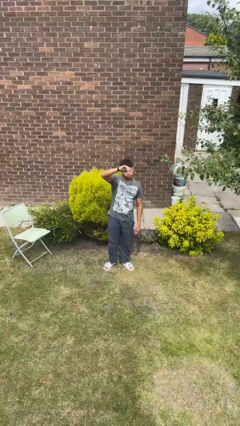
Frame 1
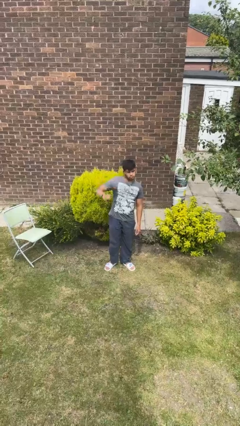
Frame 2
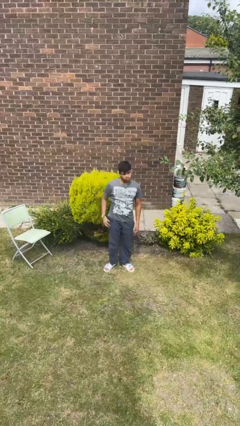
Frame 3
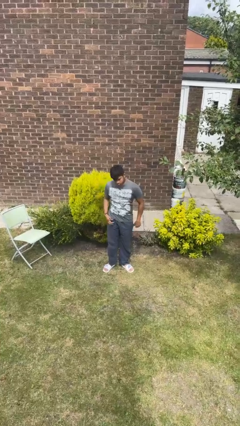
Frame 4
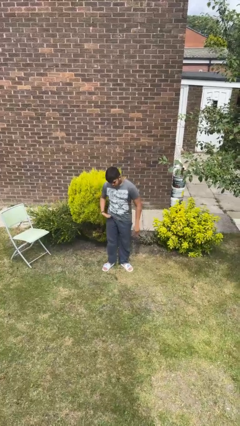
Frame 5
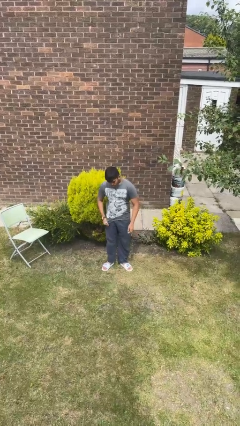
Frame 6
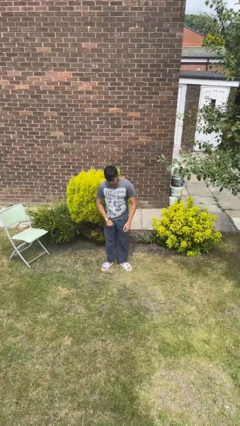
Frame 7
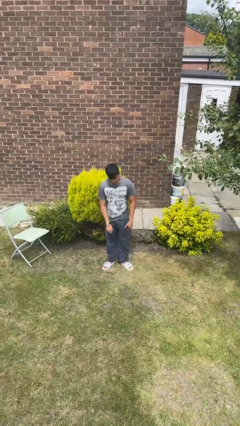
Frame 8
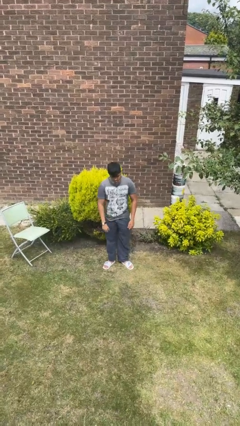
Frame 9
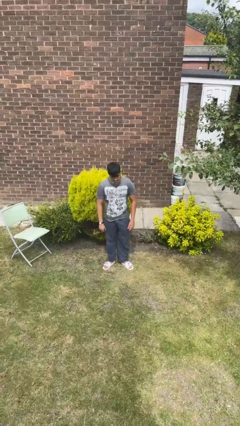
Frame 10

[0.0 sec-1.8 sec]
person gestures lower hand

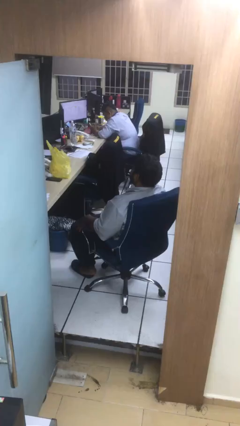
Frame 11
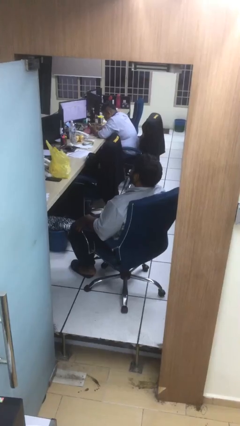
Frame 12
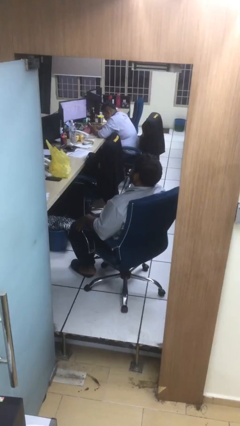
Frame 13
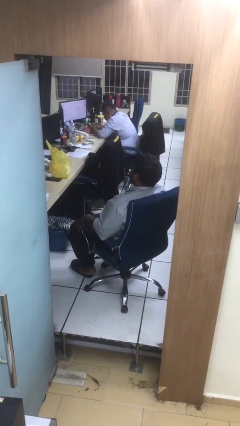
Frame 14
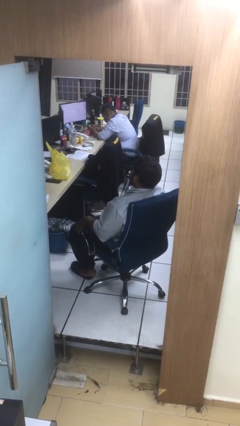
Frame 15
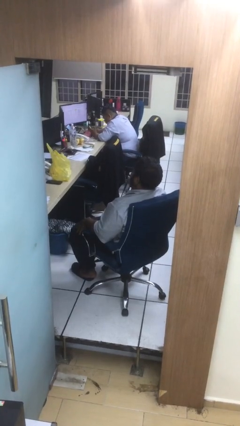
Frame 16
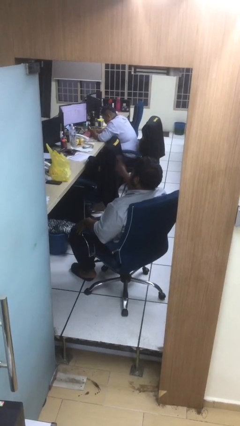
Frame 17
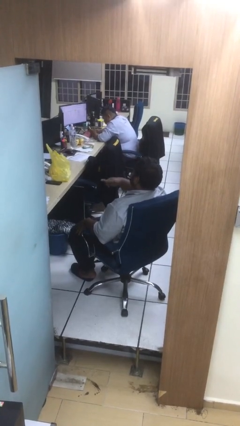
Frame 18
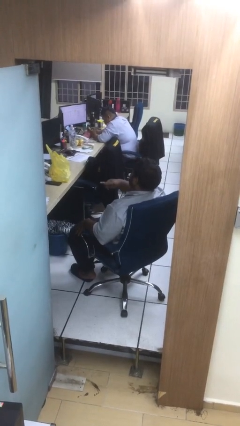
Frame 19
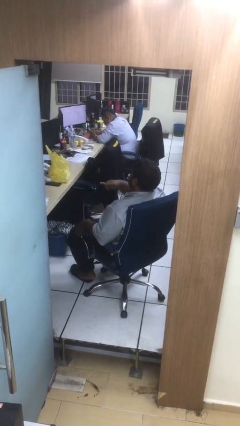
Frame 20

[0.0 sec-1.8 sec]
person gestures swipe left

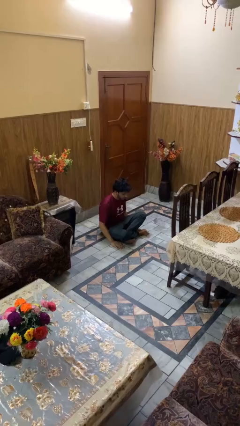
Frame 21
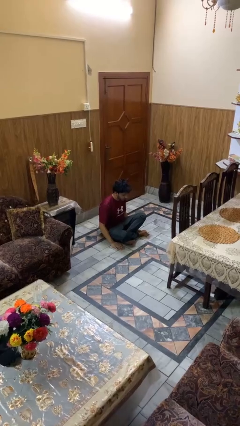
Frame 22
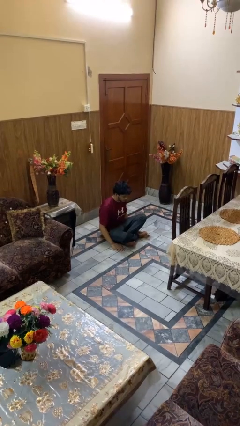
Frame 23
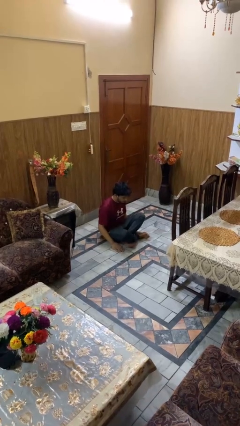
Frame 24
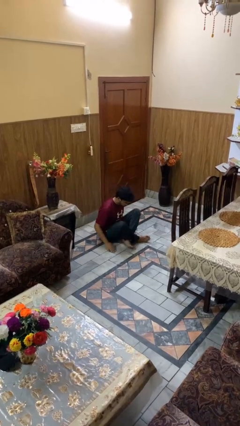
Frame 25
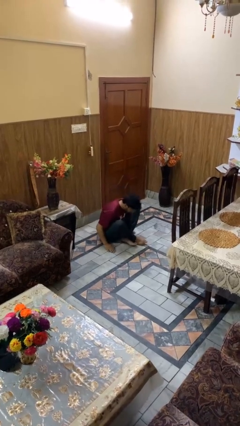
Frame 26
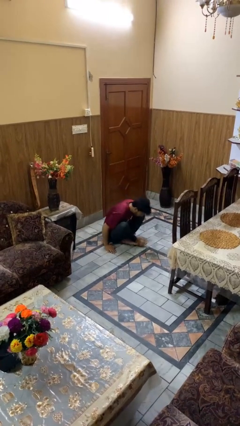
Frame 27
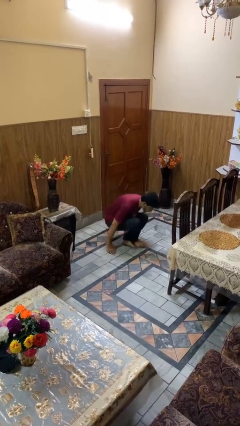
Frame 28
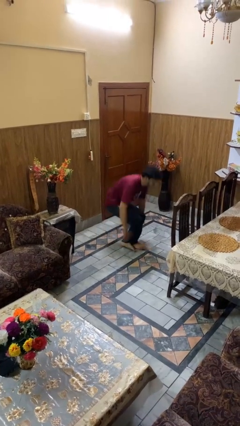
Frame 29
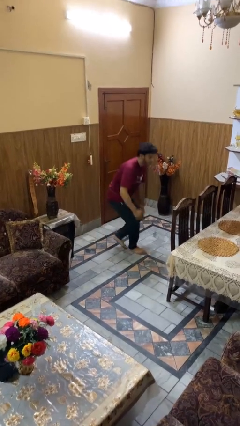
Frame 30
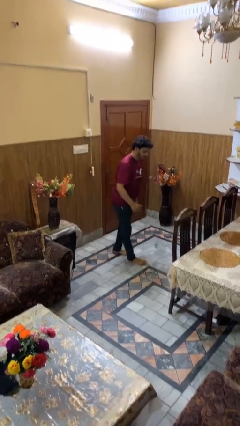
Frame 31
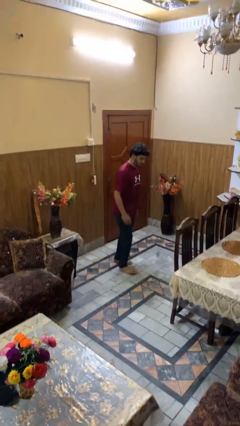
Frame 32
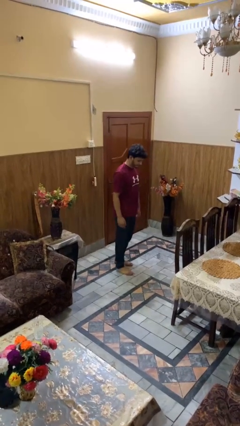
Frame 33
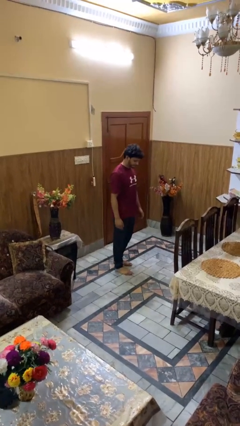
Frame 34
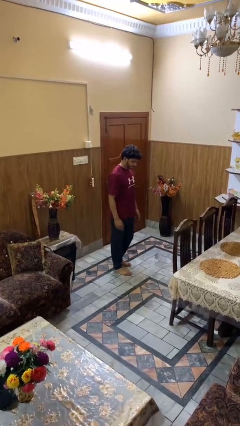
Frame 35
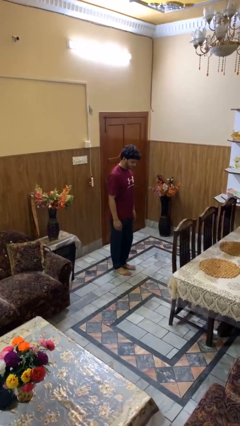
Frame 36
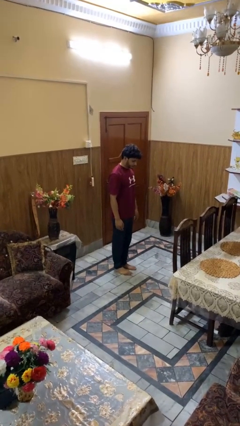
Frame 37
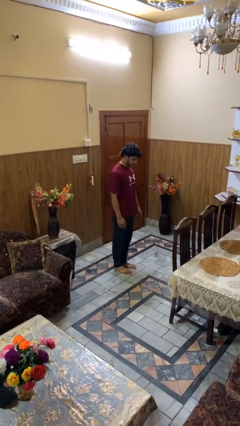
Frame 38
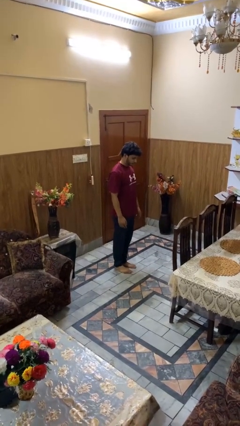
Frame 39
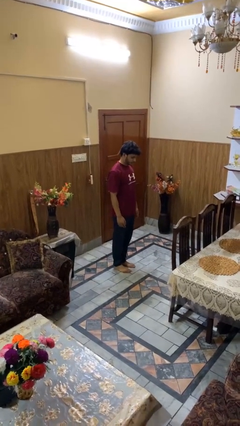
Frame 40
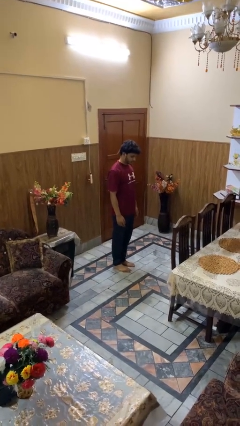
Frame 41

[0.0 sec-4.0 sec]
person stands up from floor

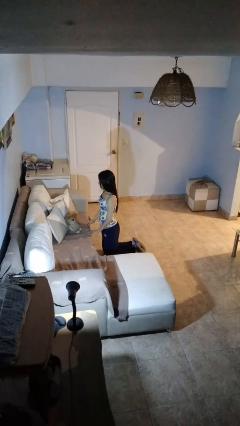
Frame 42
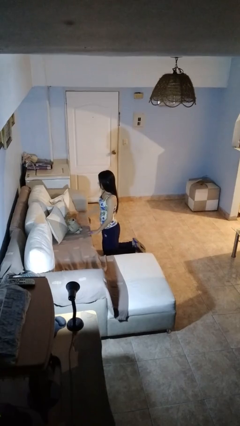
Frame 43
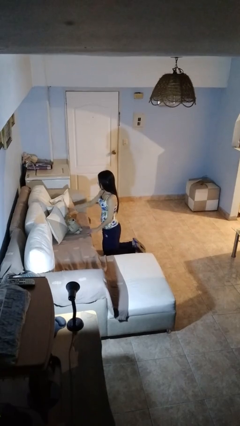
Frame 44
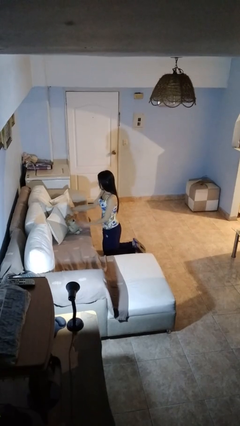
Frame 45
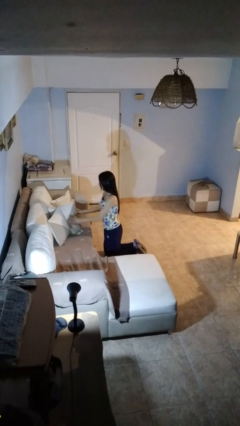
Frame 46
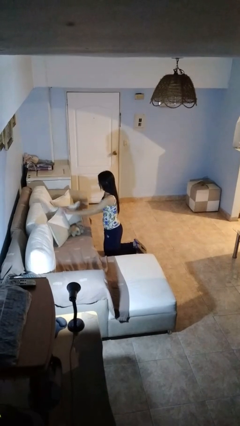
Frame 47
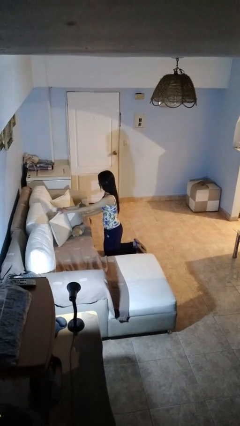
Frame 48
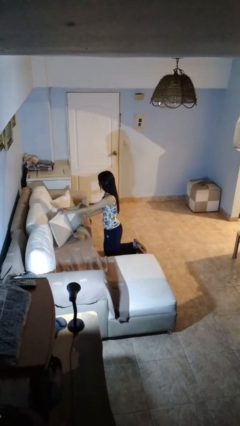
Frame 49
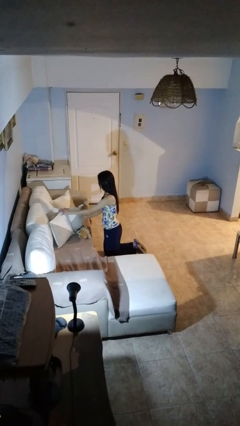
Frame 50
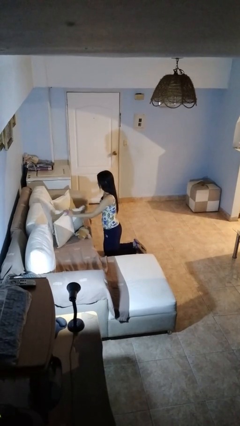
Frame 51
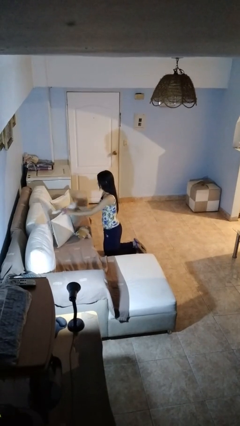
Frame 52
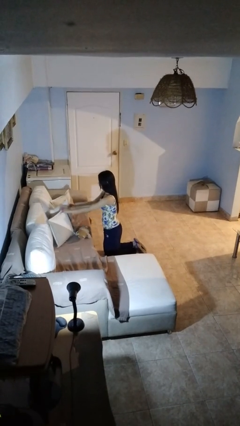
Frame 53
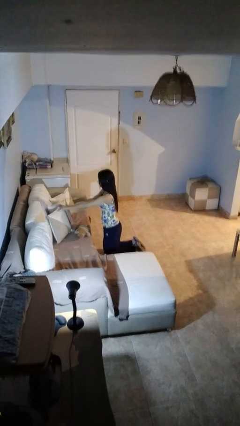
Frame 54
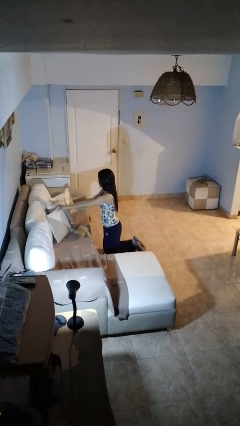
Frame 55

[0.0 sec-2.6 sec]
person searches in couch

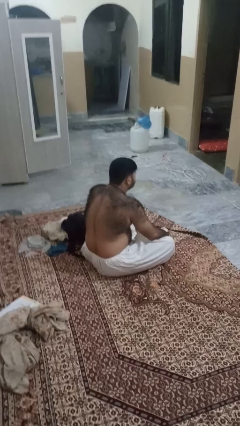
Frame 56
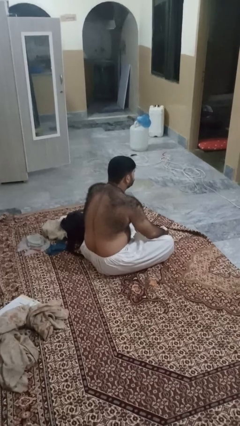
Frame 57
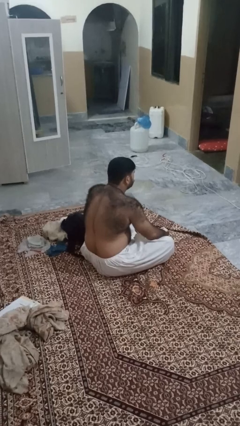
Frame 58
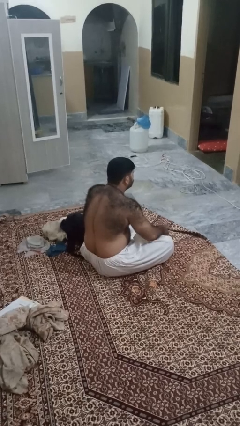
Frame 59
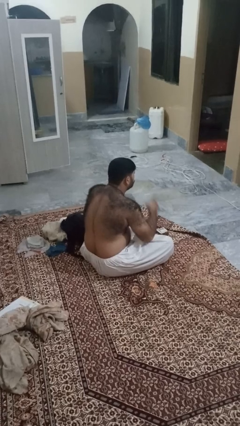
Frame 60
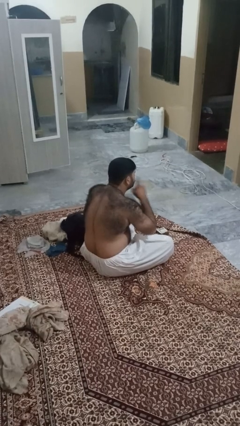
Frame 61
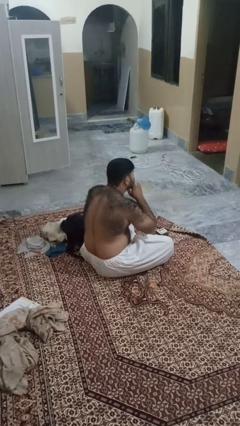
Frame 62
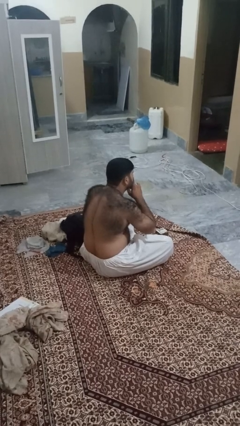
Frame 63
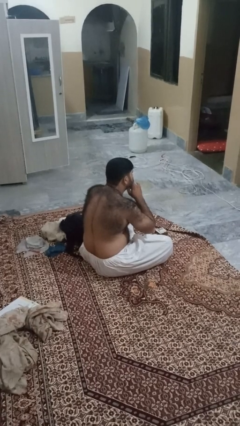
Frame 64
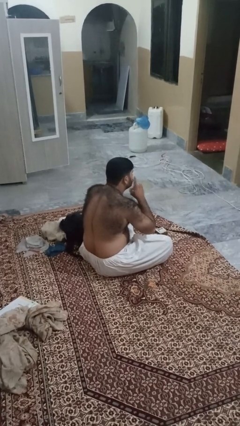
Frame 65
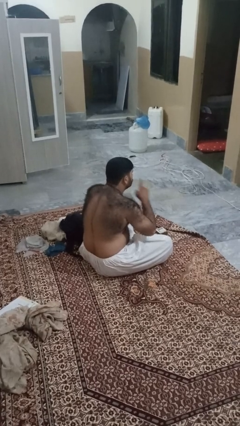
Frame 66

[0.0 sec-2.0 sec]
person gestures be quiet

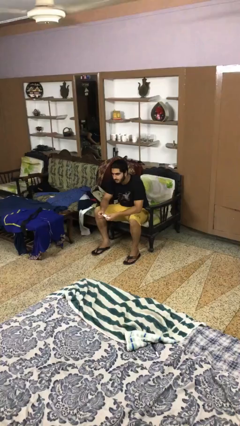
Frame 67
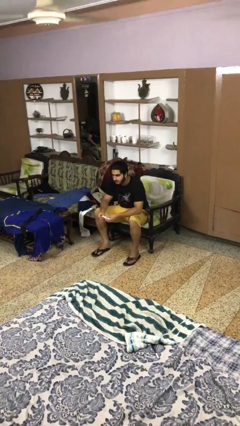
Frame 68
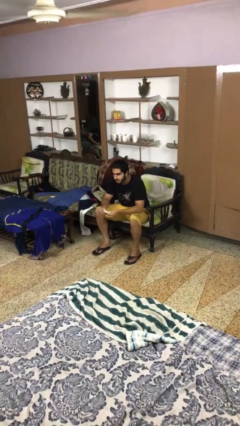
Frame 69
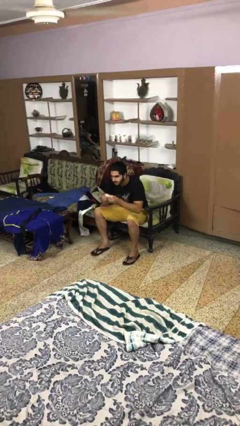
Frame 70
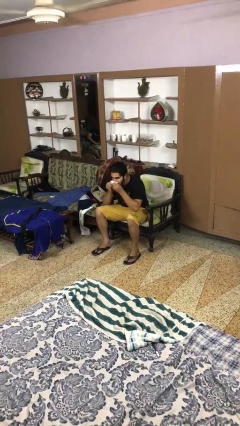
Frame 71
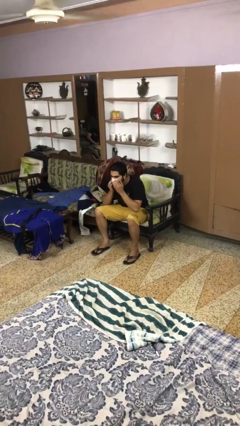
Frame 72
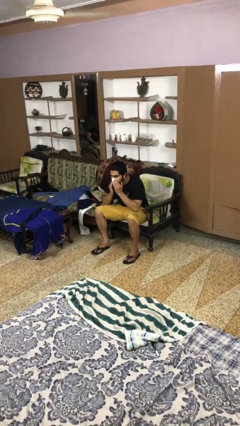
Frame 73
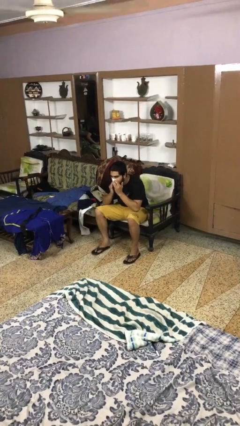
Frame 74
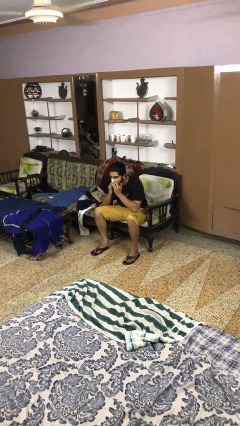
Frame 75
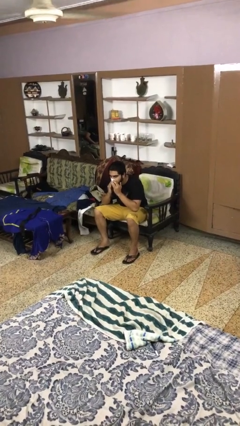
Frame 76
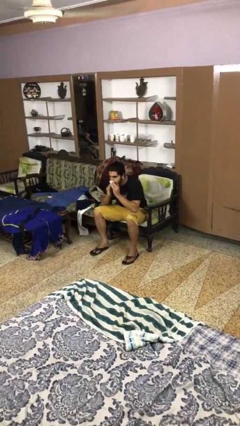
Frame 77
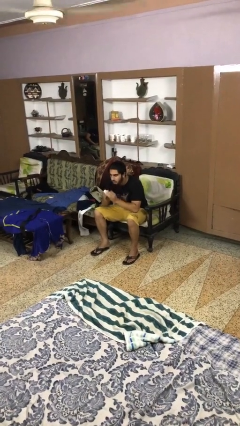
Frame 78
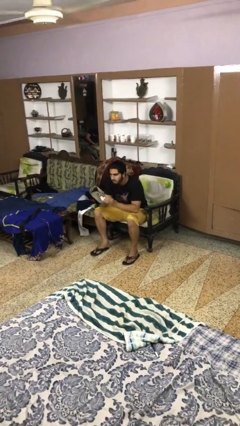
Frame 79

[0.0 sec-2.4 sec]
person blows nose

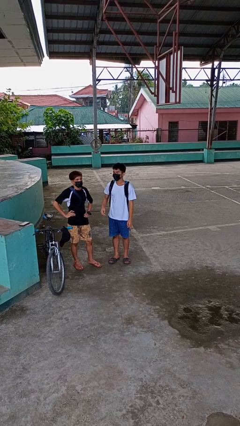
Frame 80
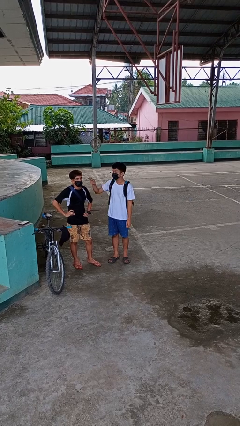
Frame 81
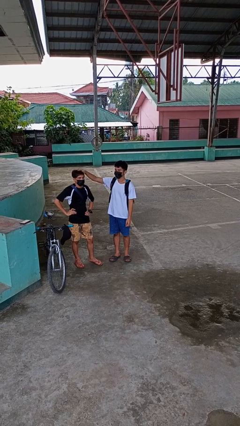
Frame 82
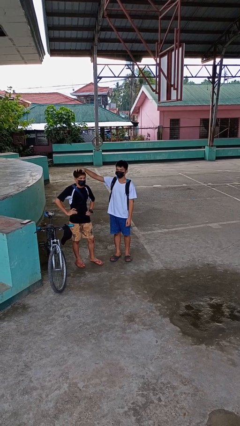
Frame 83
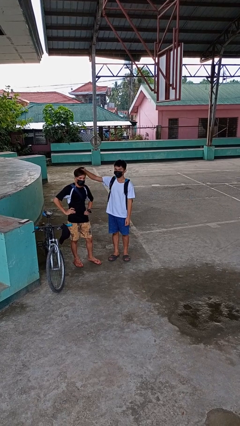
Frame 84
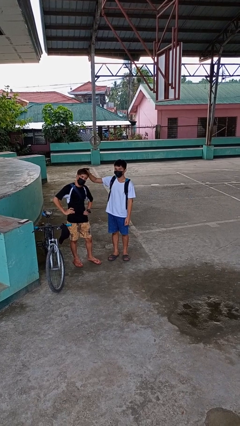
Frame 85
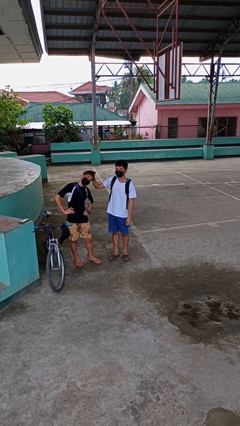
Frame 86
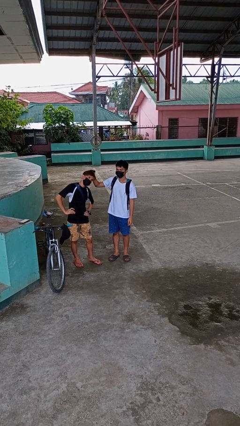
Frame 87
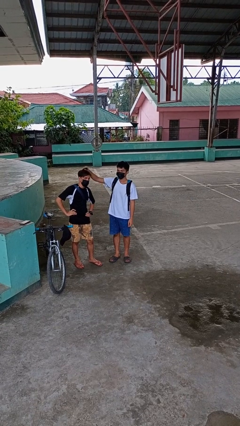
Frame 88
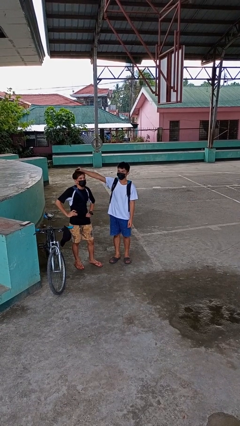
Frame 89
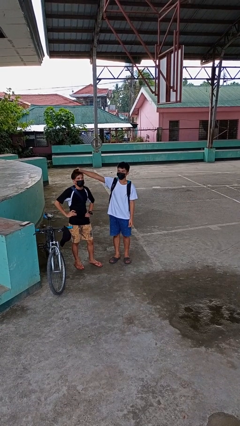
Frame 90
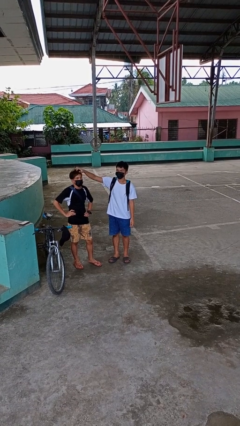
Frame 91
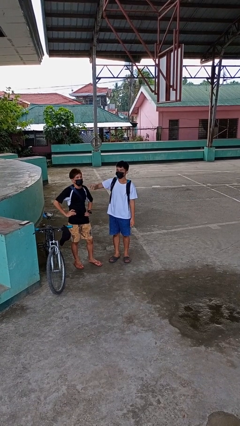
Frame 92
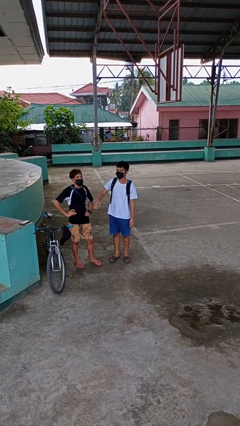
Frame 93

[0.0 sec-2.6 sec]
person grabs person by hair
